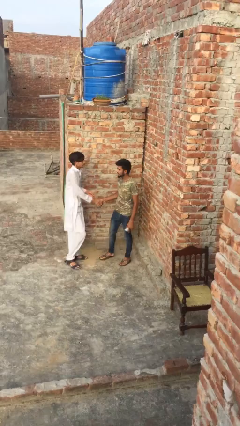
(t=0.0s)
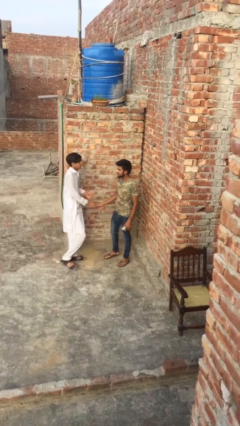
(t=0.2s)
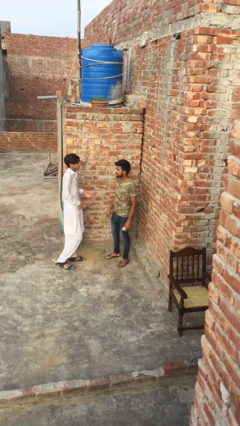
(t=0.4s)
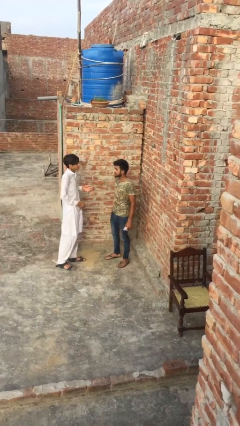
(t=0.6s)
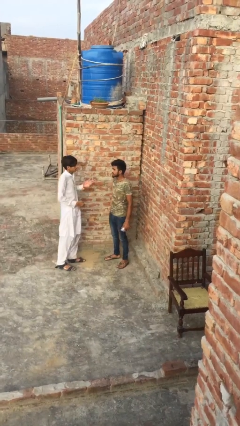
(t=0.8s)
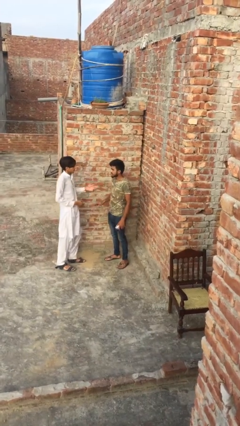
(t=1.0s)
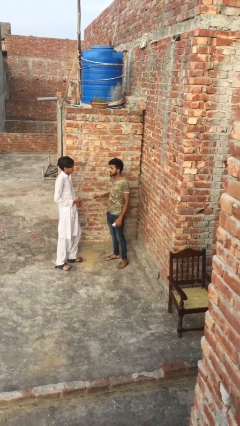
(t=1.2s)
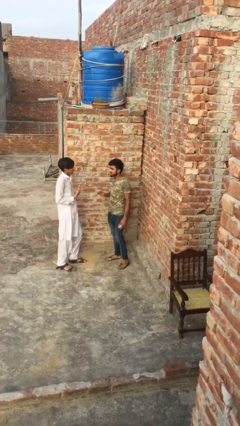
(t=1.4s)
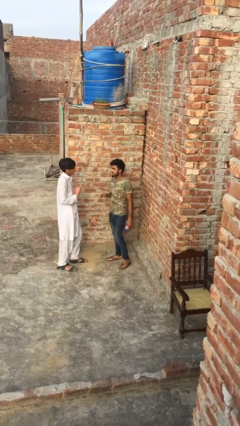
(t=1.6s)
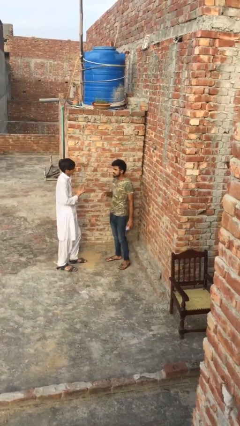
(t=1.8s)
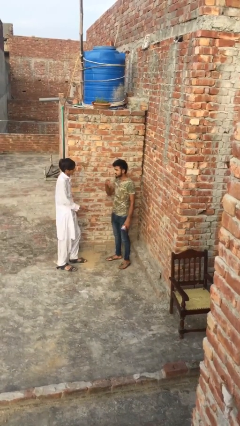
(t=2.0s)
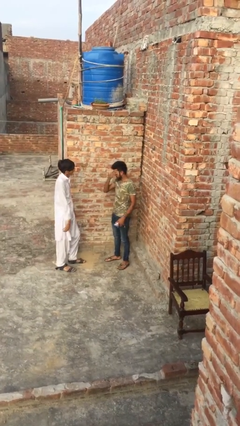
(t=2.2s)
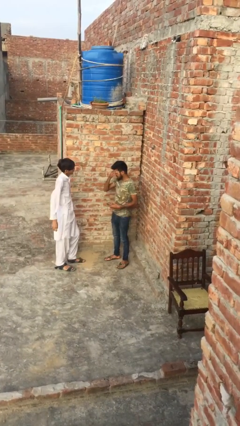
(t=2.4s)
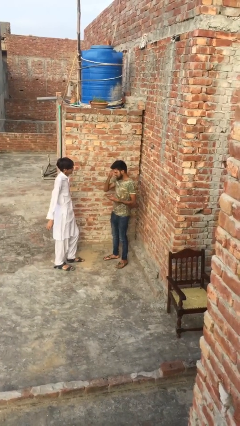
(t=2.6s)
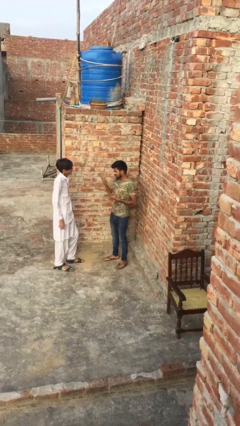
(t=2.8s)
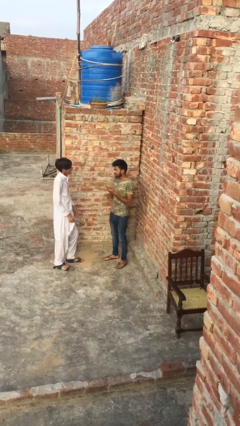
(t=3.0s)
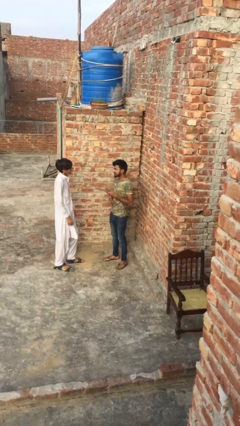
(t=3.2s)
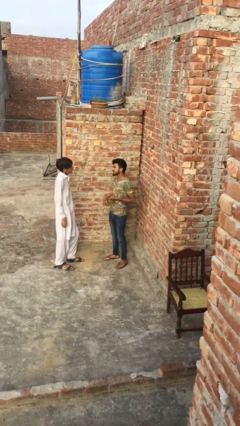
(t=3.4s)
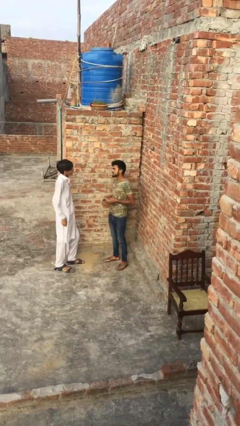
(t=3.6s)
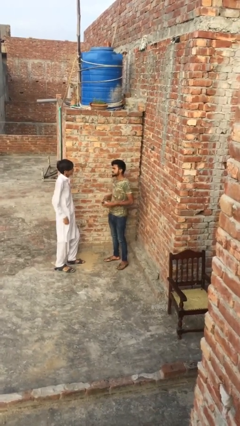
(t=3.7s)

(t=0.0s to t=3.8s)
person talks to person

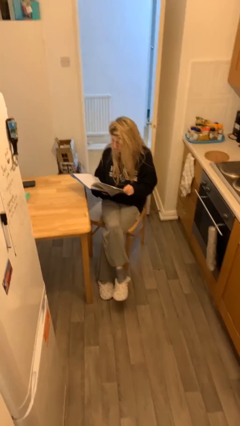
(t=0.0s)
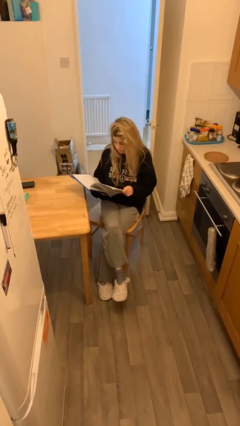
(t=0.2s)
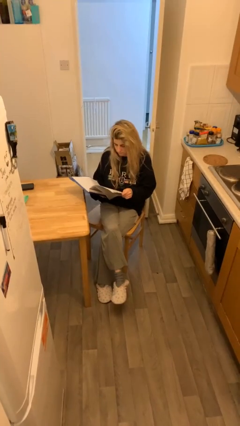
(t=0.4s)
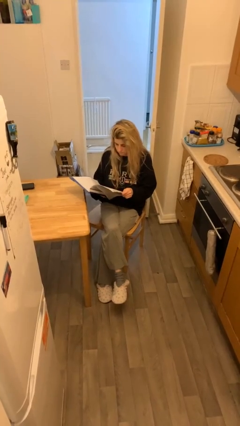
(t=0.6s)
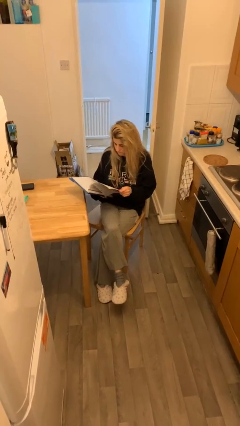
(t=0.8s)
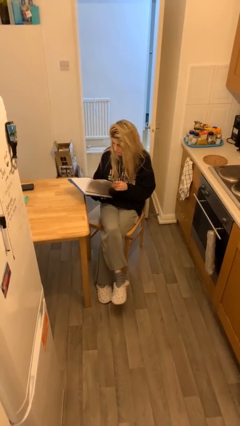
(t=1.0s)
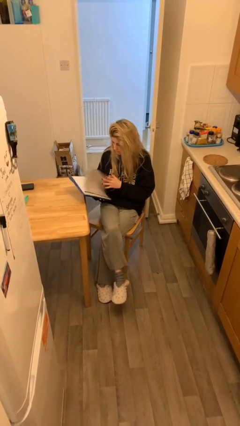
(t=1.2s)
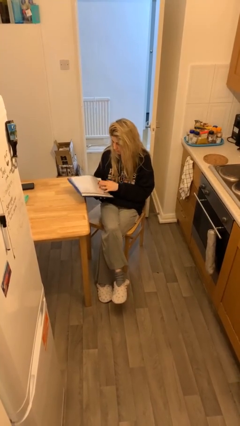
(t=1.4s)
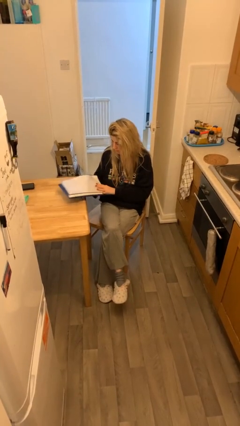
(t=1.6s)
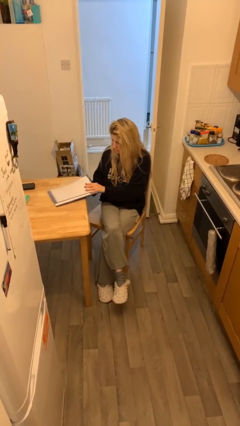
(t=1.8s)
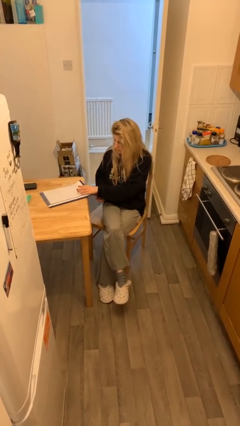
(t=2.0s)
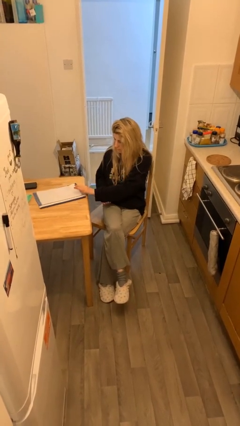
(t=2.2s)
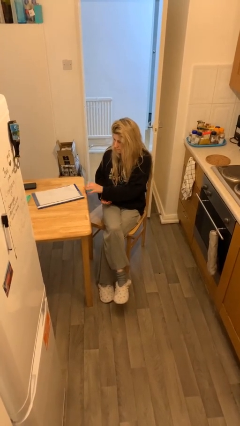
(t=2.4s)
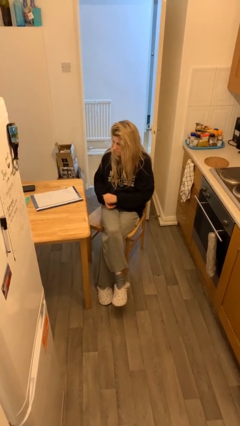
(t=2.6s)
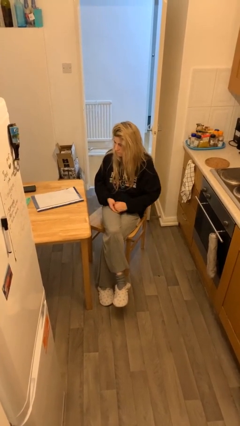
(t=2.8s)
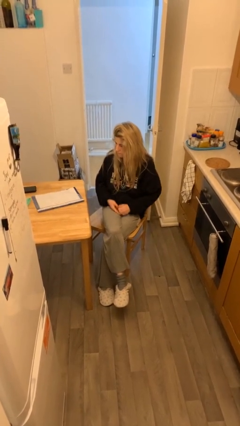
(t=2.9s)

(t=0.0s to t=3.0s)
person puts down object on table

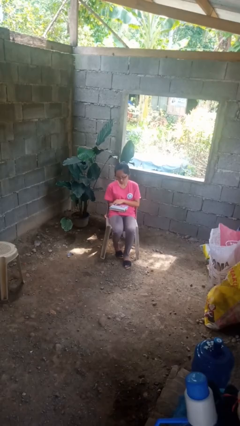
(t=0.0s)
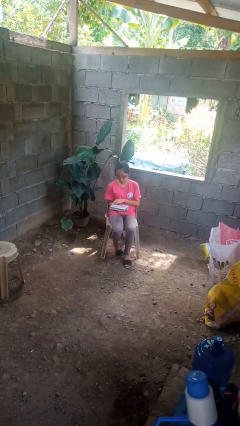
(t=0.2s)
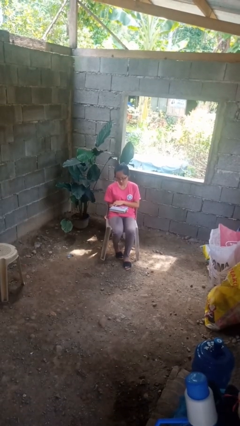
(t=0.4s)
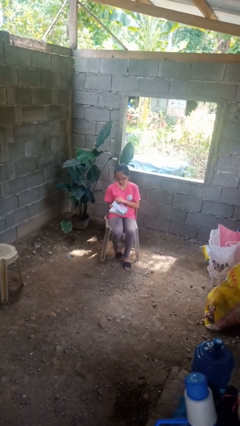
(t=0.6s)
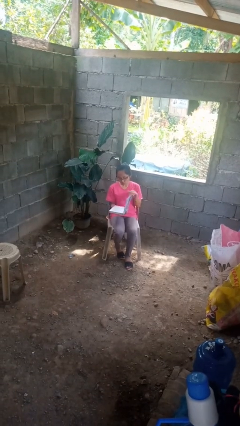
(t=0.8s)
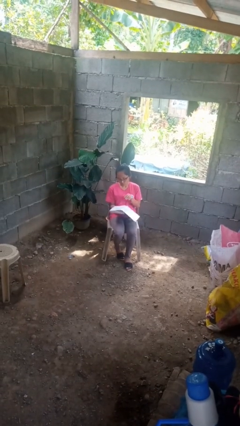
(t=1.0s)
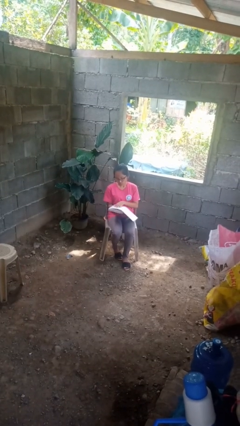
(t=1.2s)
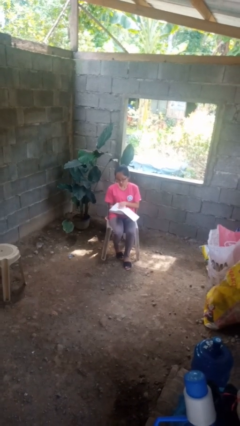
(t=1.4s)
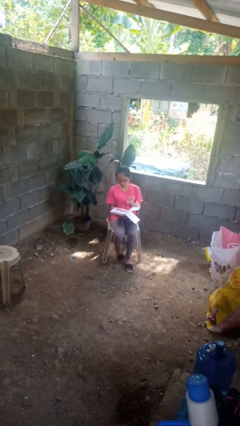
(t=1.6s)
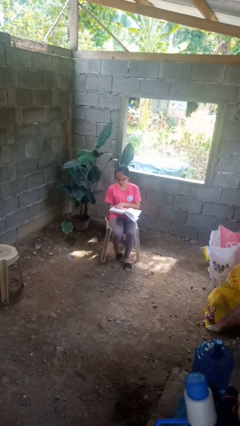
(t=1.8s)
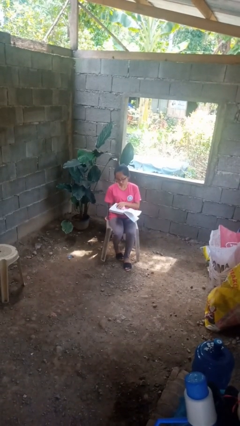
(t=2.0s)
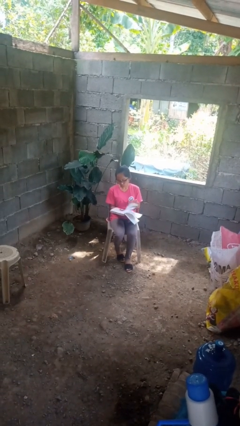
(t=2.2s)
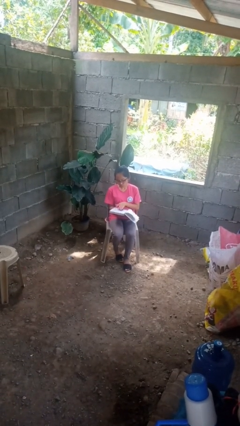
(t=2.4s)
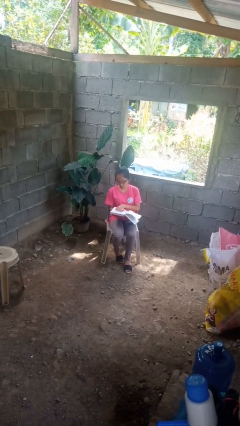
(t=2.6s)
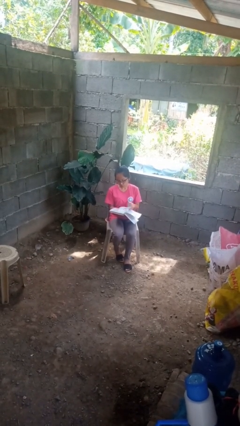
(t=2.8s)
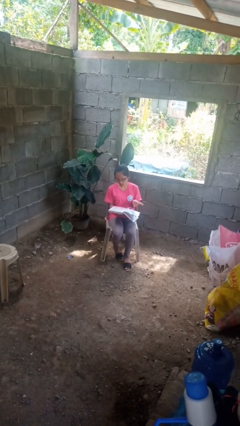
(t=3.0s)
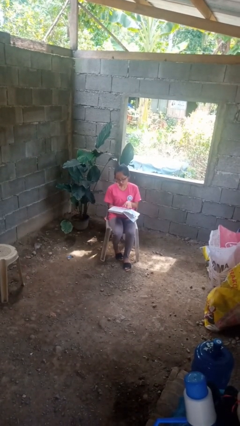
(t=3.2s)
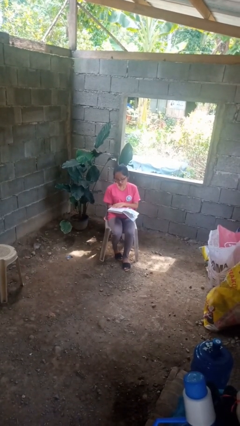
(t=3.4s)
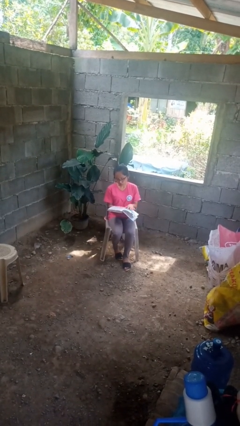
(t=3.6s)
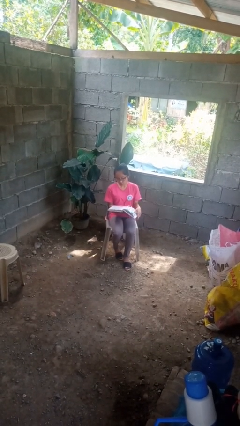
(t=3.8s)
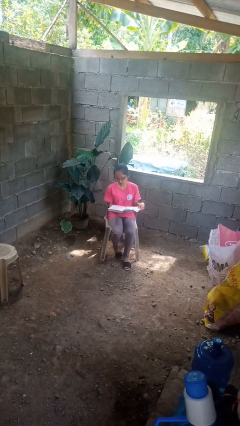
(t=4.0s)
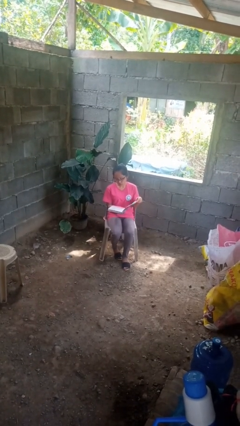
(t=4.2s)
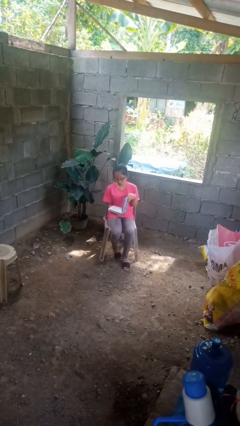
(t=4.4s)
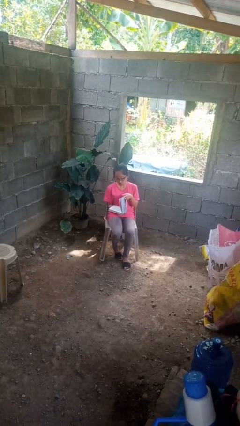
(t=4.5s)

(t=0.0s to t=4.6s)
person reads book

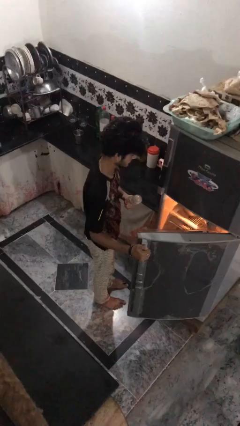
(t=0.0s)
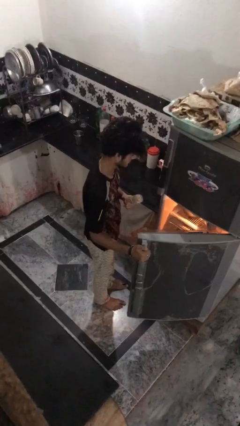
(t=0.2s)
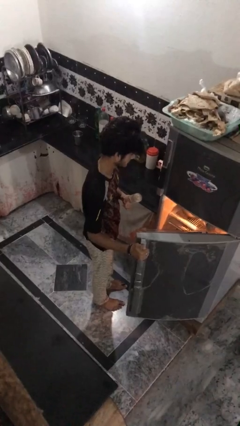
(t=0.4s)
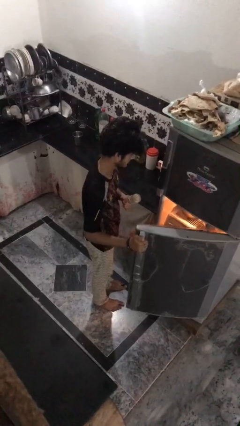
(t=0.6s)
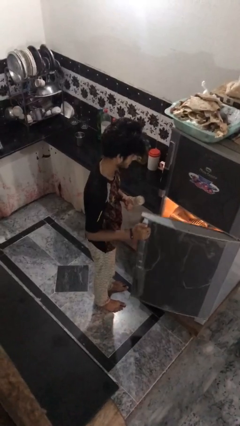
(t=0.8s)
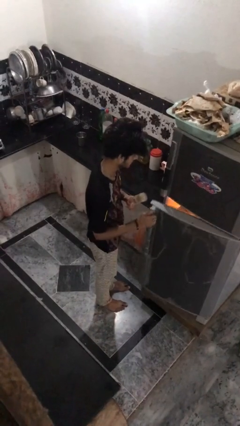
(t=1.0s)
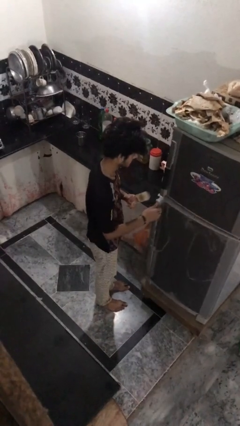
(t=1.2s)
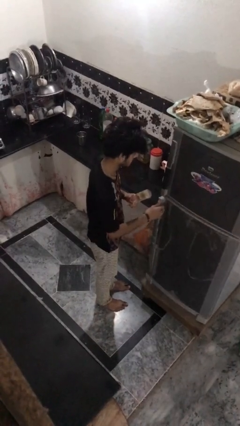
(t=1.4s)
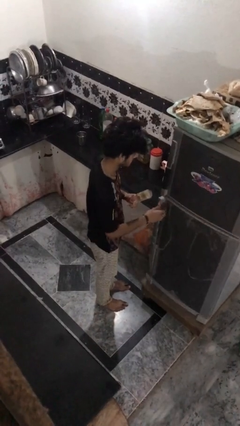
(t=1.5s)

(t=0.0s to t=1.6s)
person closes refrigerator

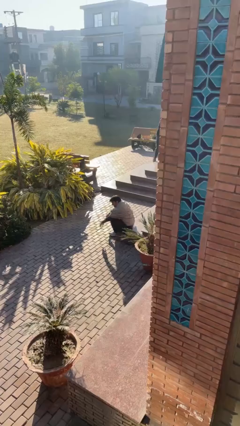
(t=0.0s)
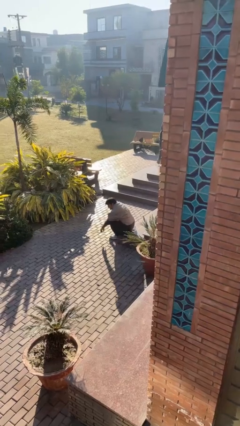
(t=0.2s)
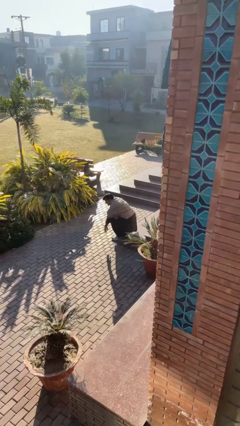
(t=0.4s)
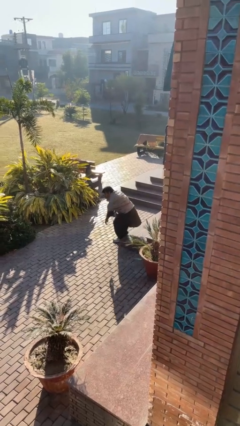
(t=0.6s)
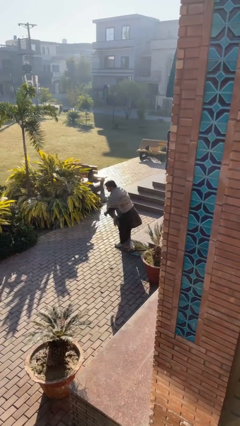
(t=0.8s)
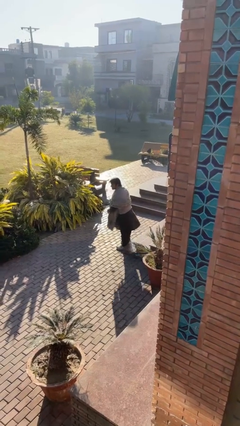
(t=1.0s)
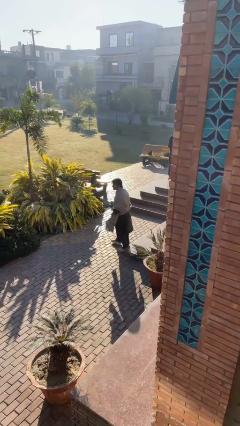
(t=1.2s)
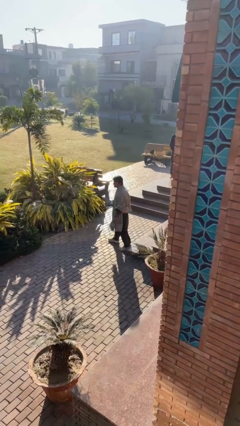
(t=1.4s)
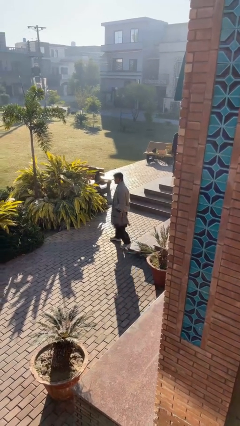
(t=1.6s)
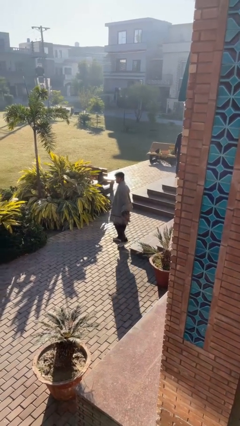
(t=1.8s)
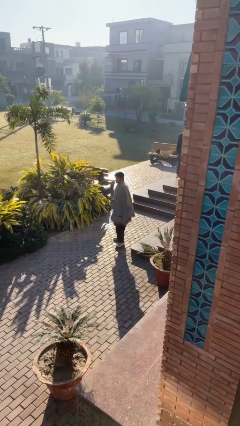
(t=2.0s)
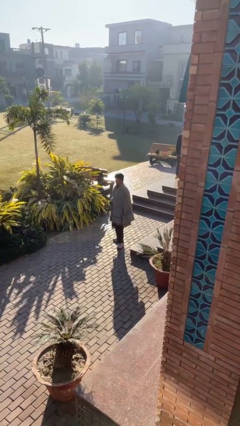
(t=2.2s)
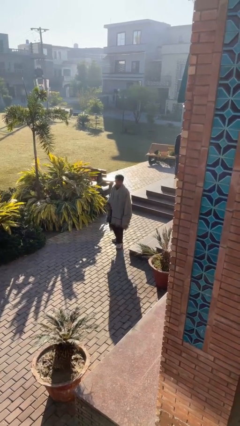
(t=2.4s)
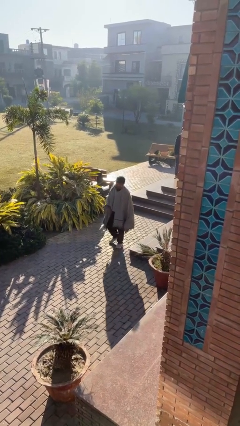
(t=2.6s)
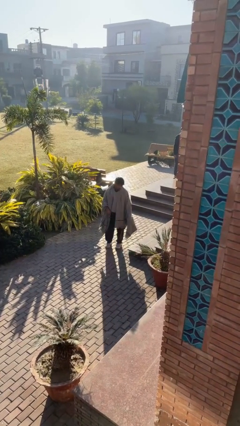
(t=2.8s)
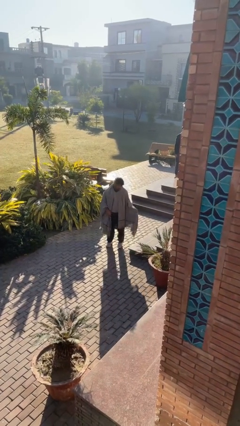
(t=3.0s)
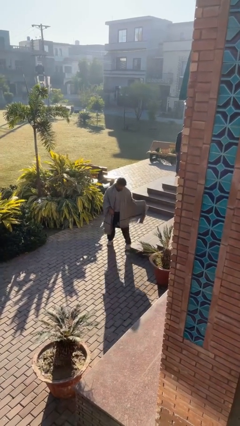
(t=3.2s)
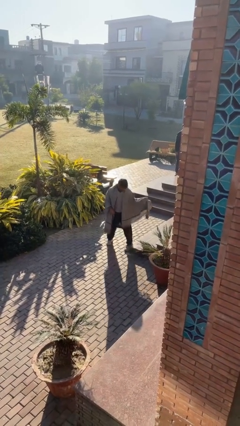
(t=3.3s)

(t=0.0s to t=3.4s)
person stands up

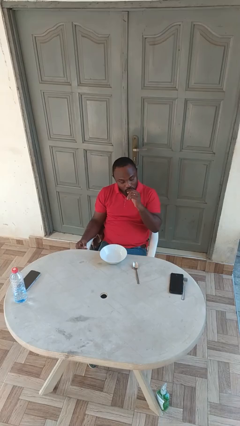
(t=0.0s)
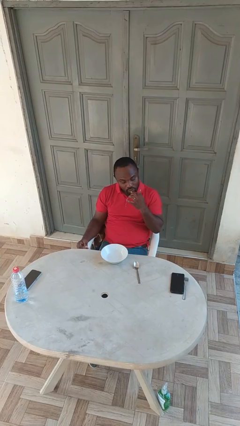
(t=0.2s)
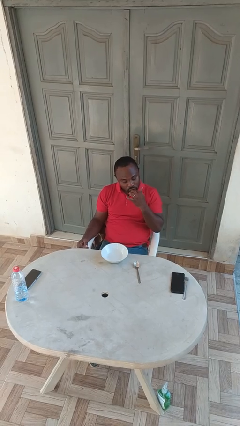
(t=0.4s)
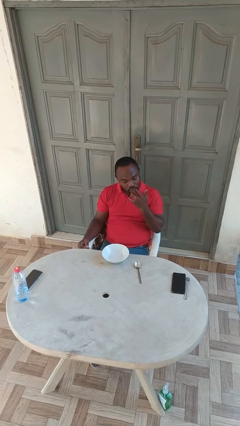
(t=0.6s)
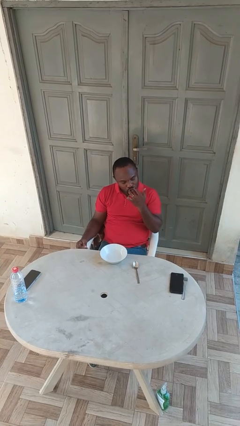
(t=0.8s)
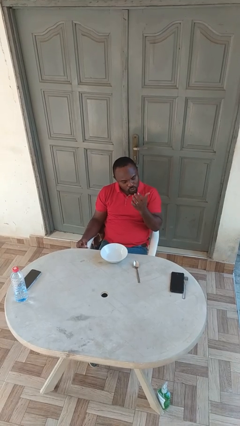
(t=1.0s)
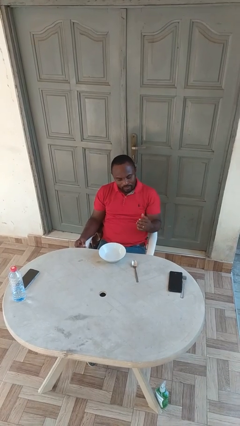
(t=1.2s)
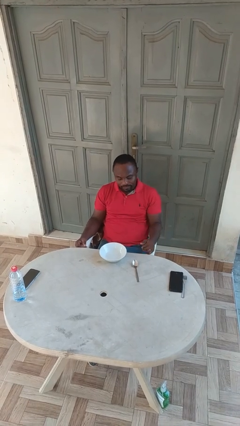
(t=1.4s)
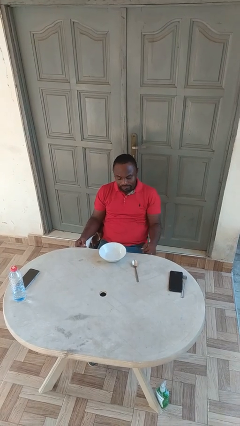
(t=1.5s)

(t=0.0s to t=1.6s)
person licks fingers
